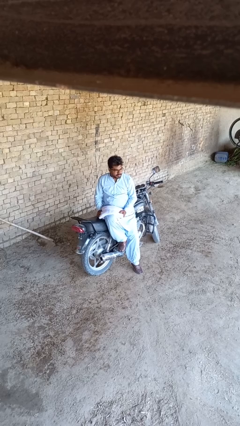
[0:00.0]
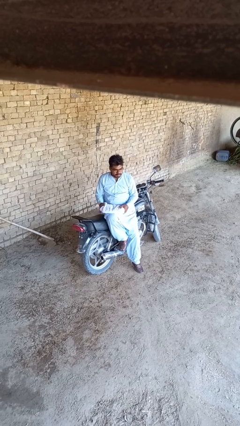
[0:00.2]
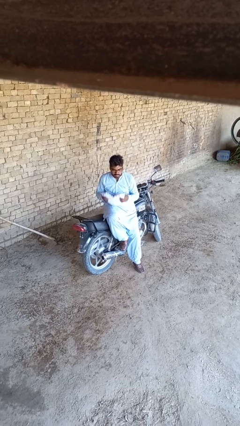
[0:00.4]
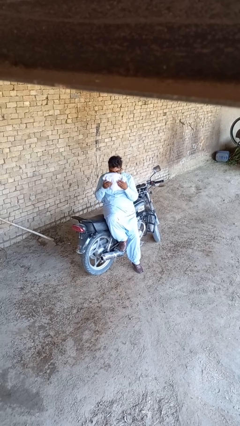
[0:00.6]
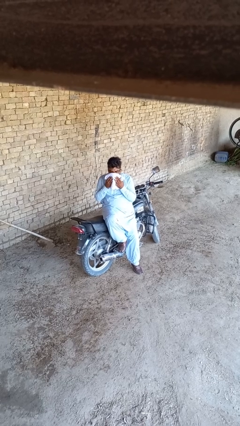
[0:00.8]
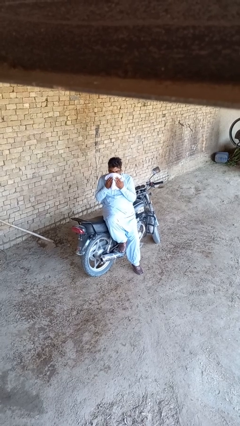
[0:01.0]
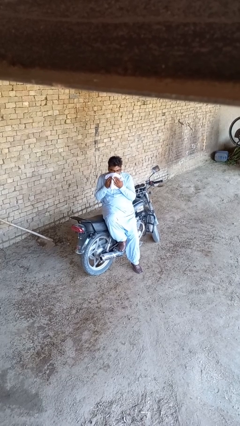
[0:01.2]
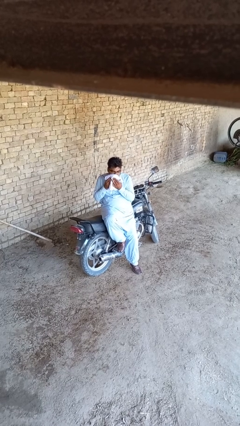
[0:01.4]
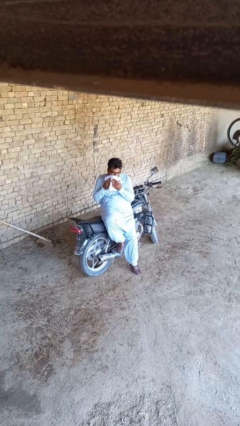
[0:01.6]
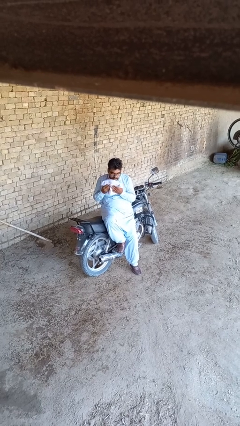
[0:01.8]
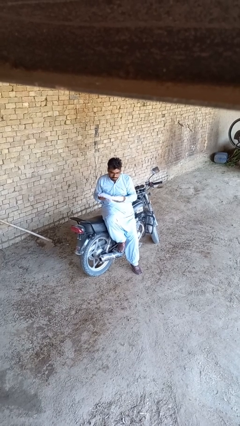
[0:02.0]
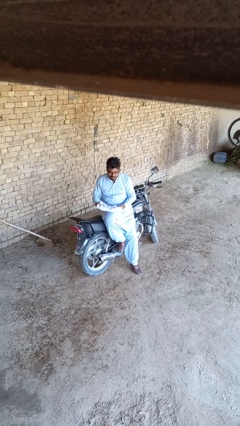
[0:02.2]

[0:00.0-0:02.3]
person wipes mouth with napkin

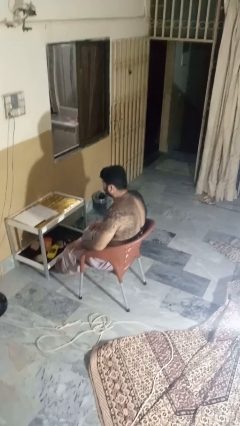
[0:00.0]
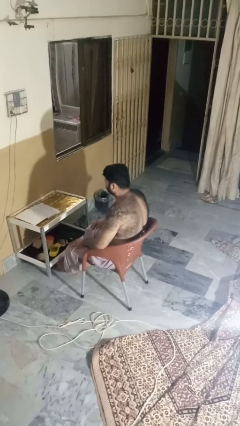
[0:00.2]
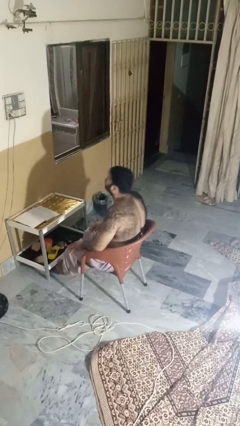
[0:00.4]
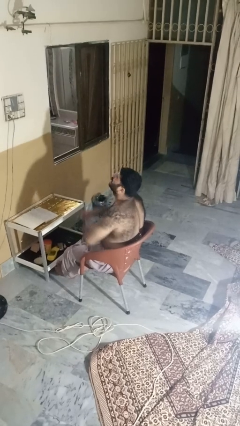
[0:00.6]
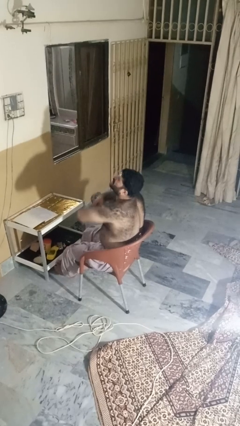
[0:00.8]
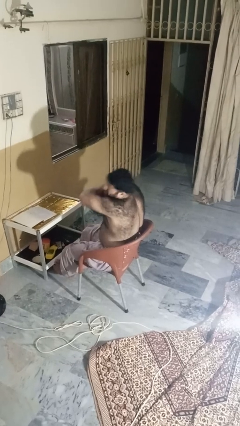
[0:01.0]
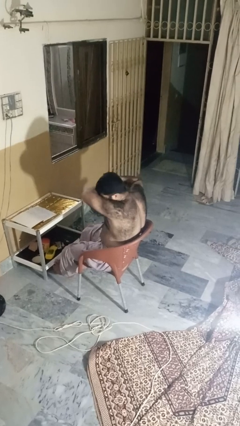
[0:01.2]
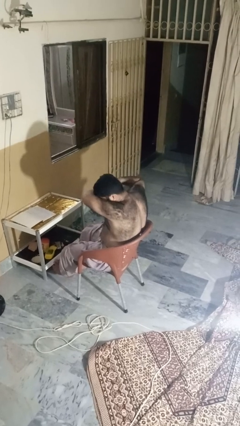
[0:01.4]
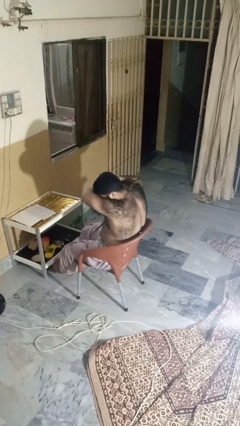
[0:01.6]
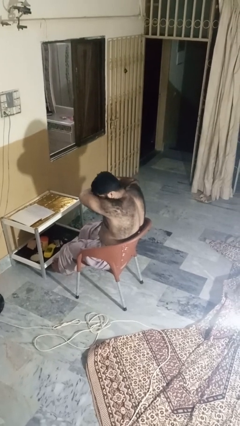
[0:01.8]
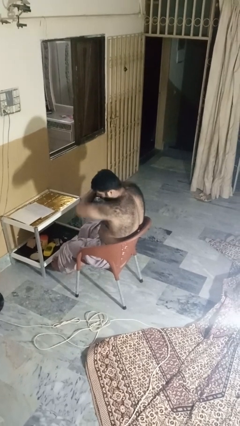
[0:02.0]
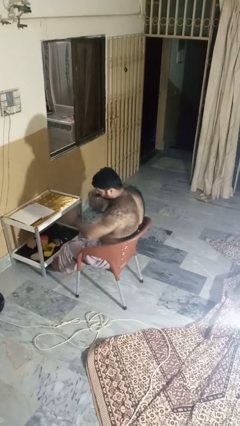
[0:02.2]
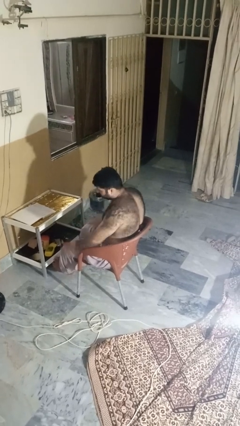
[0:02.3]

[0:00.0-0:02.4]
person sneezes into arm

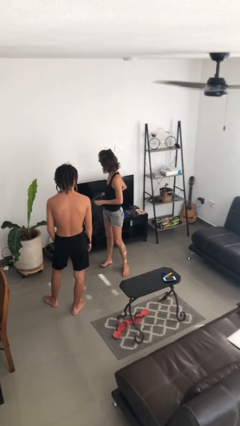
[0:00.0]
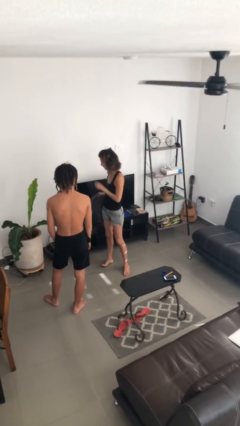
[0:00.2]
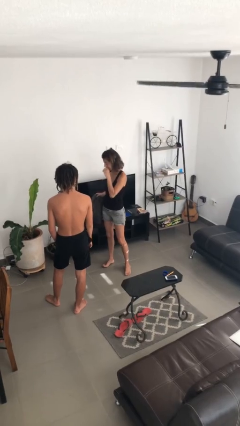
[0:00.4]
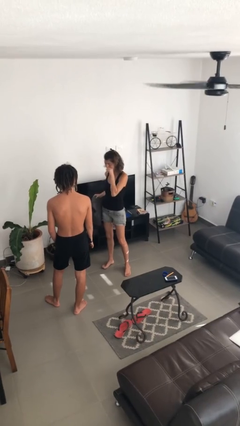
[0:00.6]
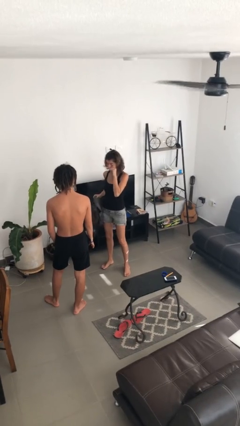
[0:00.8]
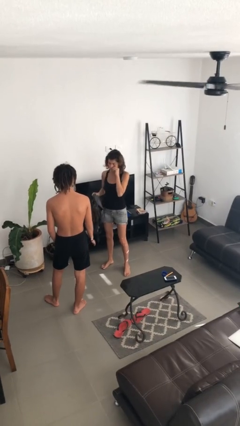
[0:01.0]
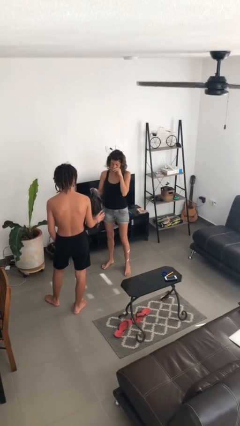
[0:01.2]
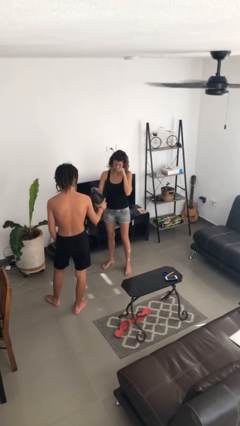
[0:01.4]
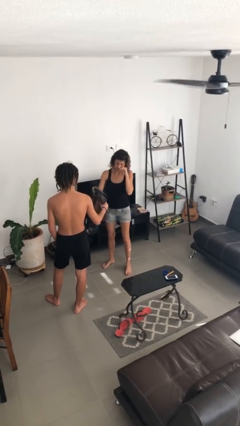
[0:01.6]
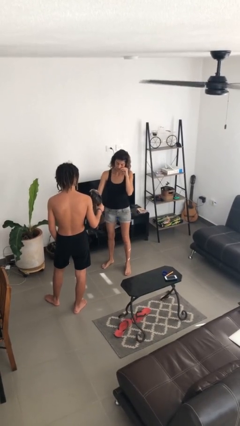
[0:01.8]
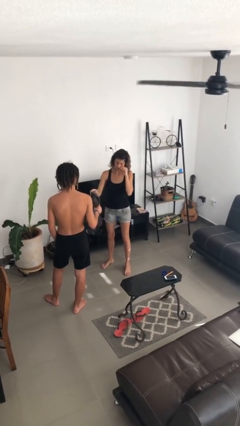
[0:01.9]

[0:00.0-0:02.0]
person transfers object to person

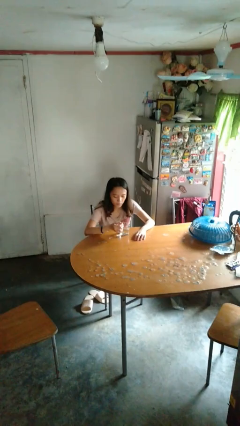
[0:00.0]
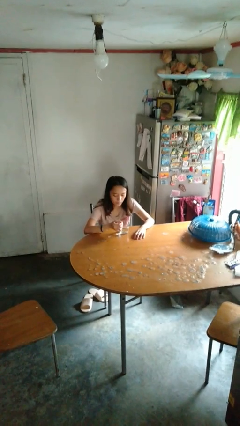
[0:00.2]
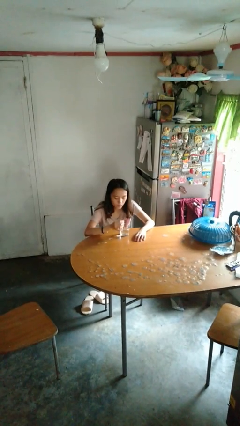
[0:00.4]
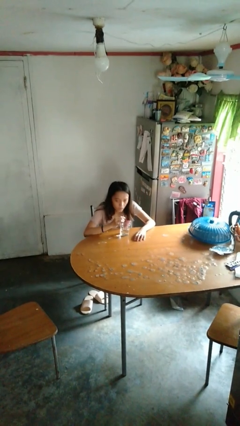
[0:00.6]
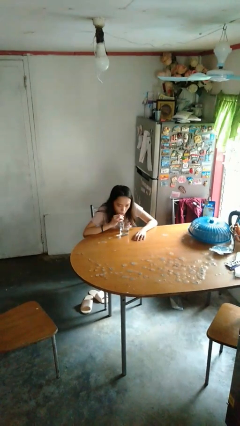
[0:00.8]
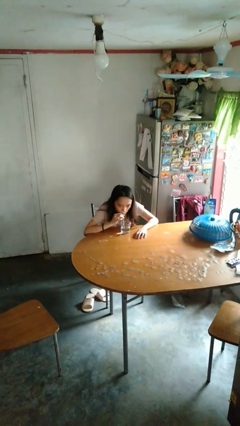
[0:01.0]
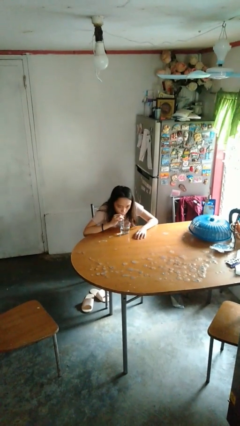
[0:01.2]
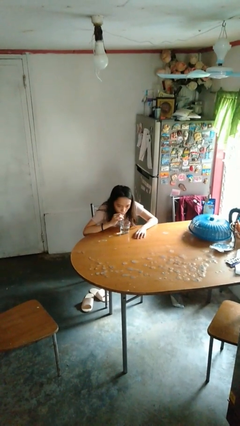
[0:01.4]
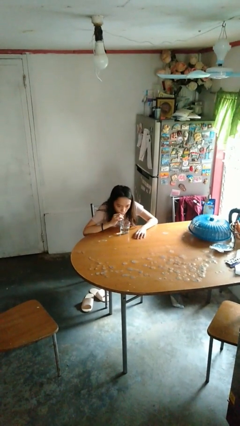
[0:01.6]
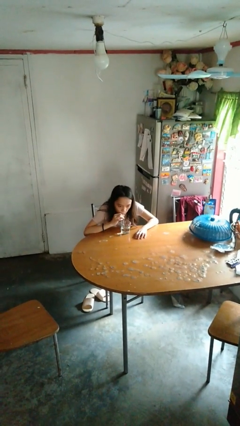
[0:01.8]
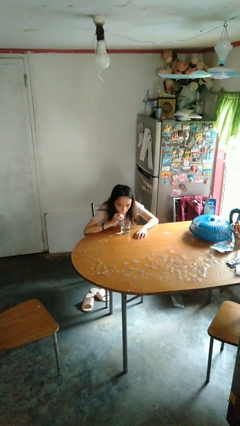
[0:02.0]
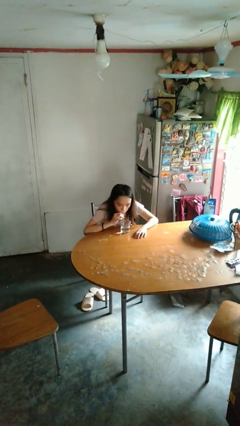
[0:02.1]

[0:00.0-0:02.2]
person drinks from straw

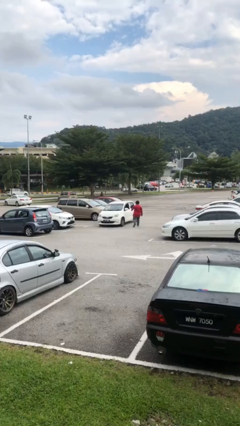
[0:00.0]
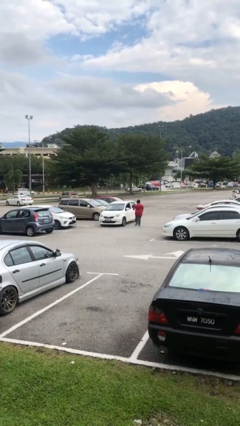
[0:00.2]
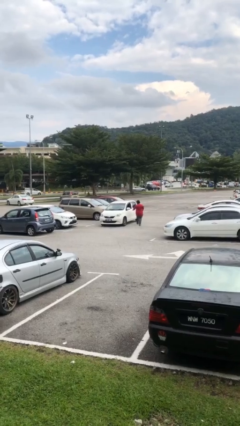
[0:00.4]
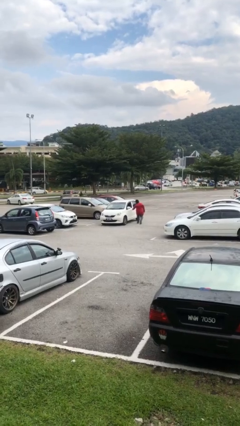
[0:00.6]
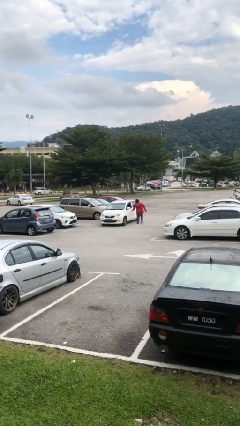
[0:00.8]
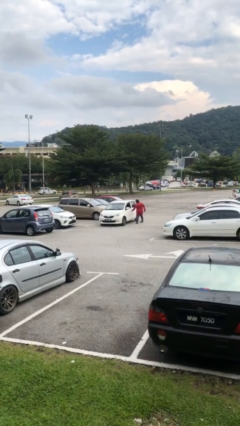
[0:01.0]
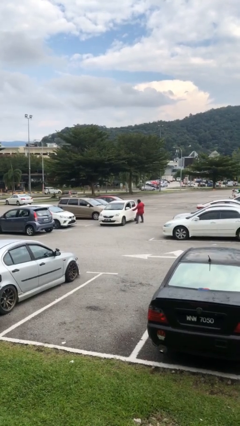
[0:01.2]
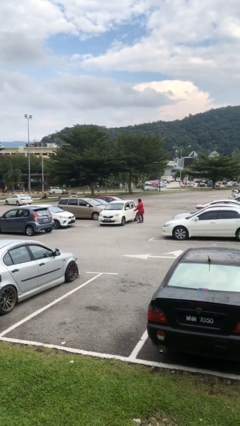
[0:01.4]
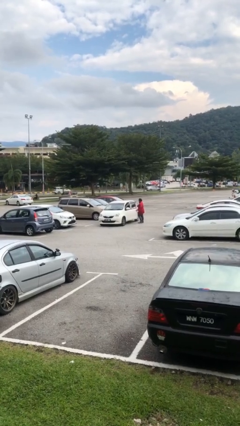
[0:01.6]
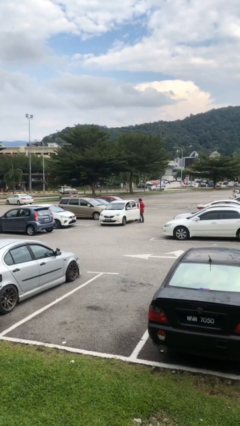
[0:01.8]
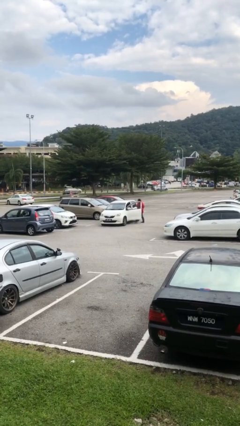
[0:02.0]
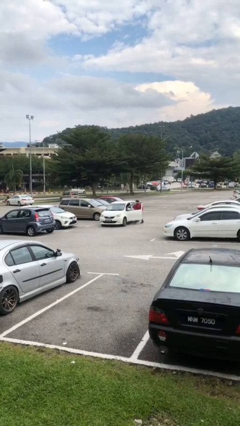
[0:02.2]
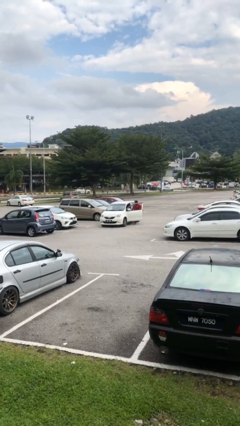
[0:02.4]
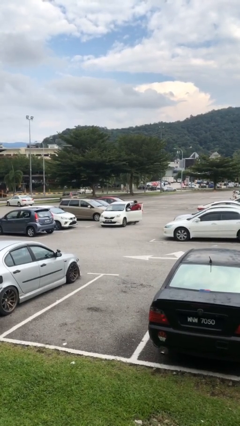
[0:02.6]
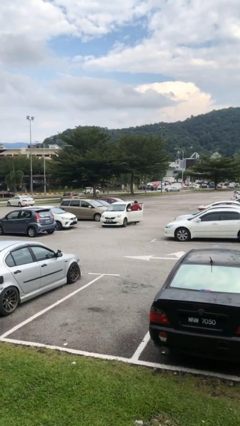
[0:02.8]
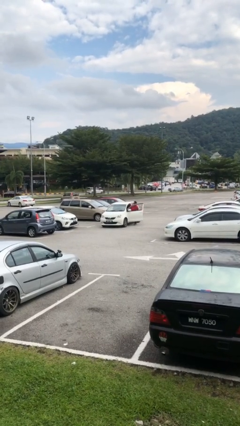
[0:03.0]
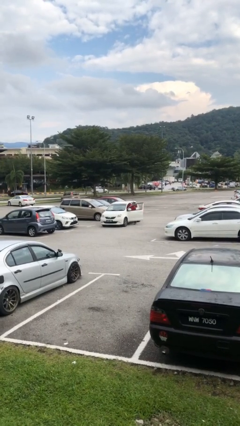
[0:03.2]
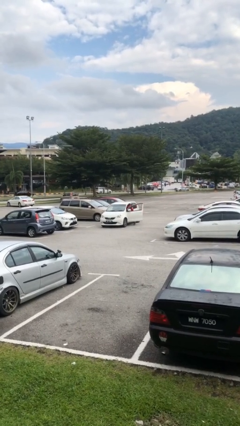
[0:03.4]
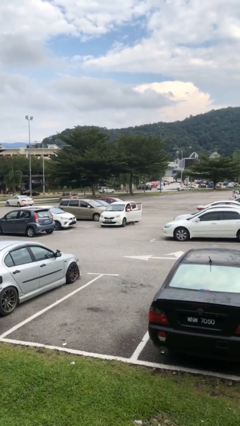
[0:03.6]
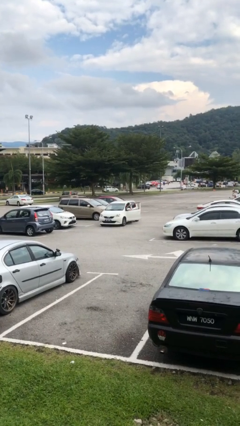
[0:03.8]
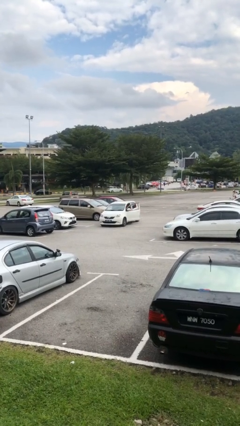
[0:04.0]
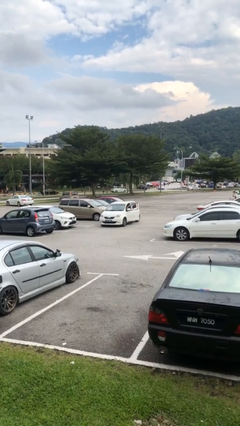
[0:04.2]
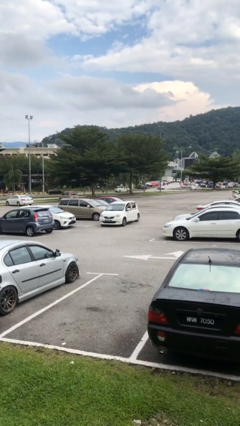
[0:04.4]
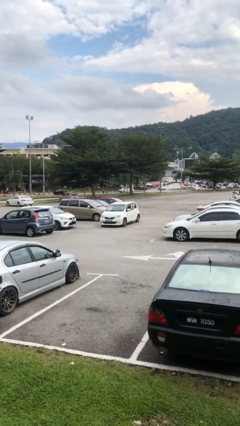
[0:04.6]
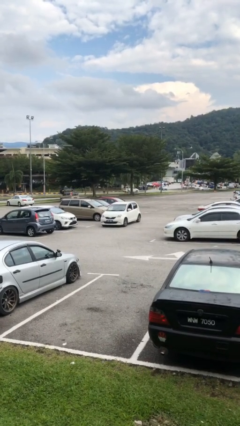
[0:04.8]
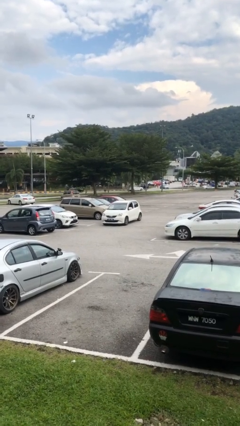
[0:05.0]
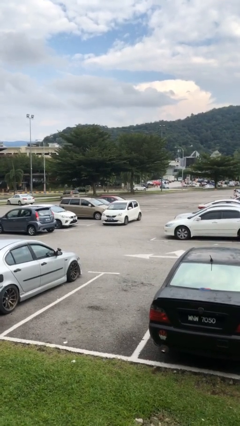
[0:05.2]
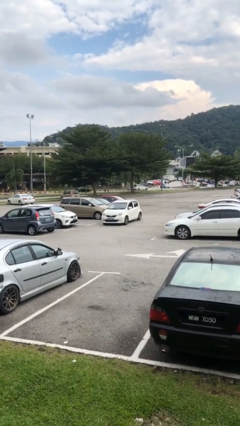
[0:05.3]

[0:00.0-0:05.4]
car picks up person

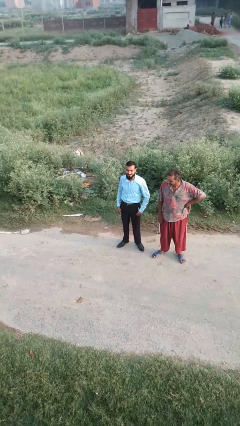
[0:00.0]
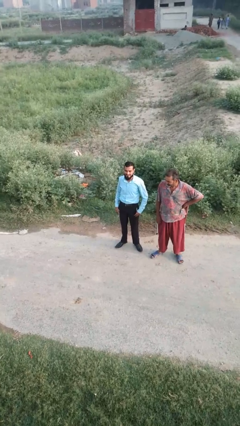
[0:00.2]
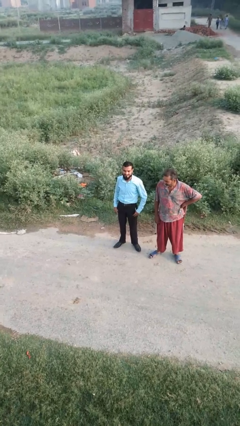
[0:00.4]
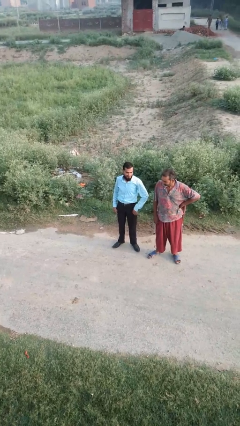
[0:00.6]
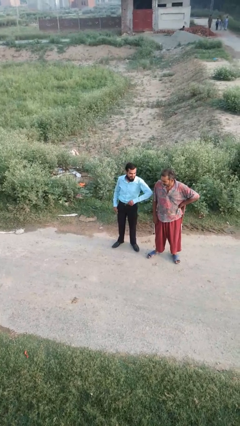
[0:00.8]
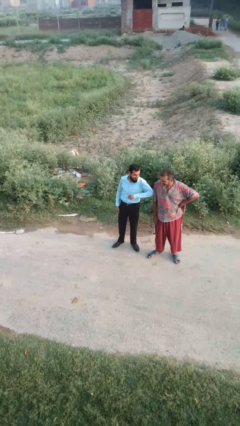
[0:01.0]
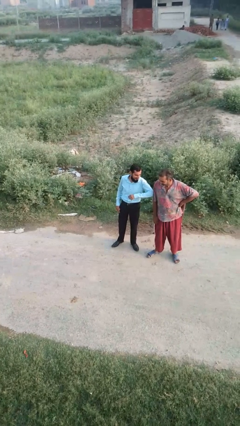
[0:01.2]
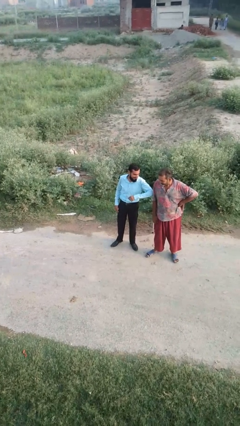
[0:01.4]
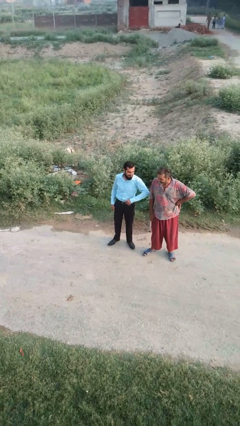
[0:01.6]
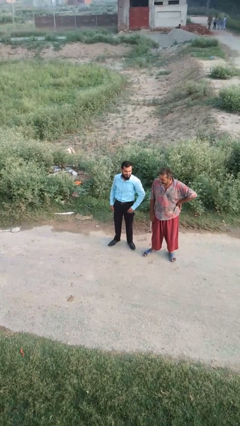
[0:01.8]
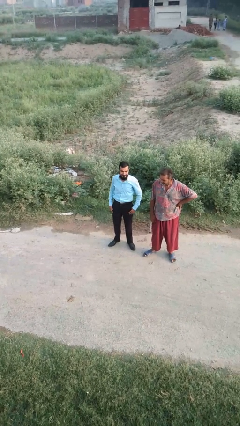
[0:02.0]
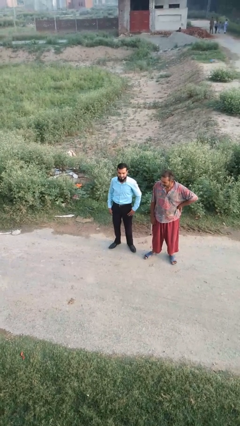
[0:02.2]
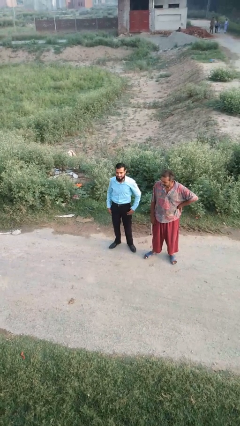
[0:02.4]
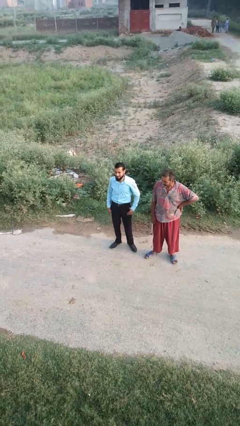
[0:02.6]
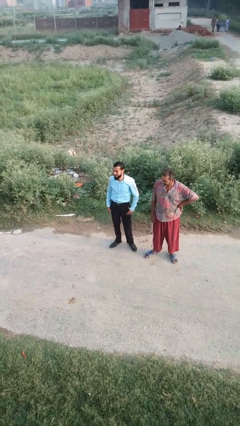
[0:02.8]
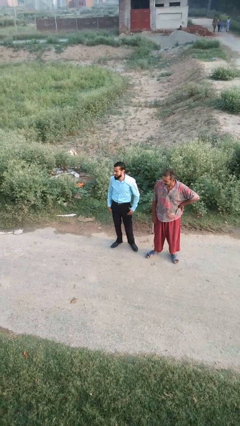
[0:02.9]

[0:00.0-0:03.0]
person nudges person with elbow

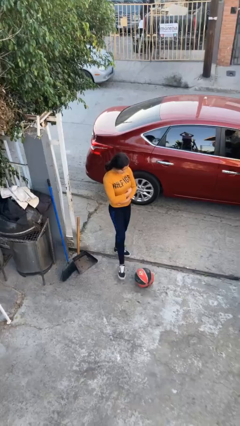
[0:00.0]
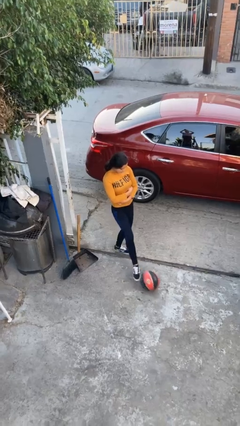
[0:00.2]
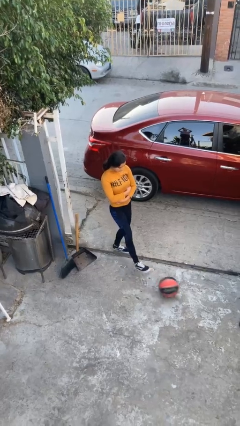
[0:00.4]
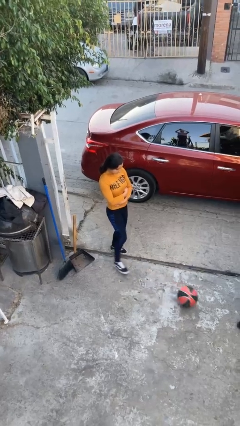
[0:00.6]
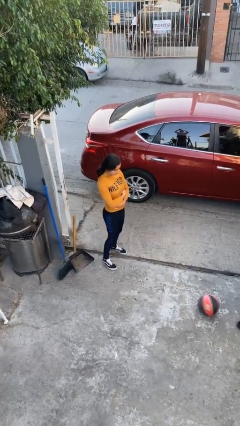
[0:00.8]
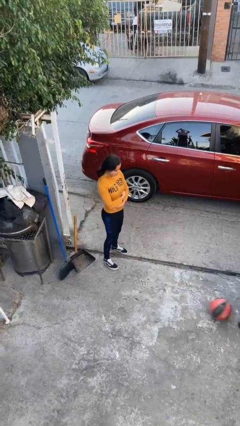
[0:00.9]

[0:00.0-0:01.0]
person kicks object to person
